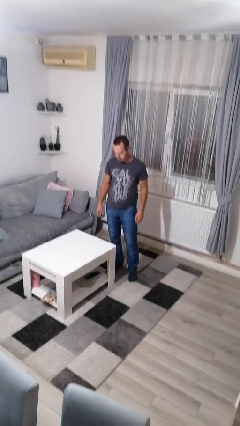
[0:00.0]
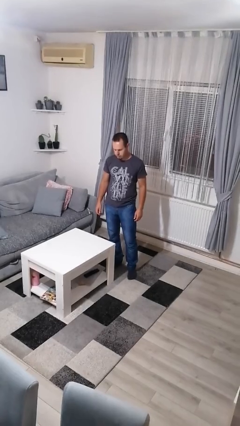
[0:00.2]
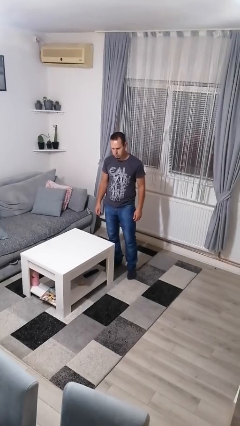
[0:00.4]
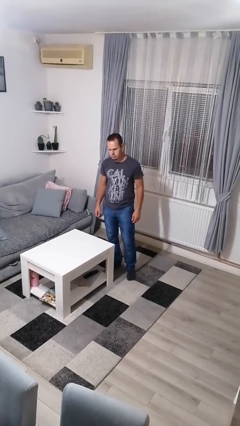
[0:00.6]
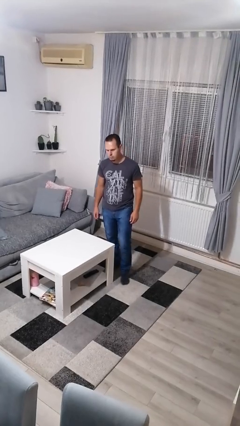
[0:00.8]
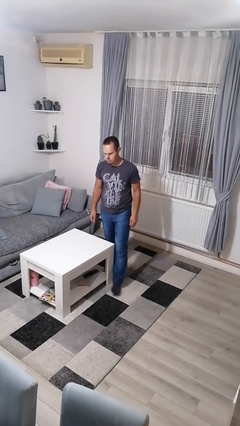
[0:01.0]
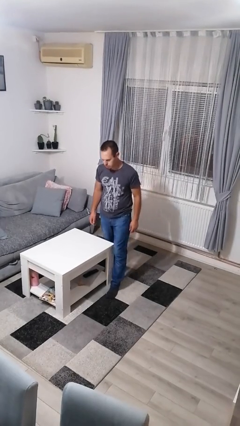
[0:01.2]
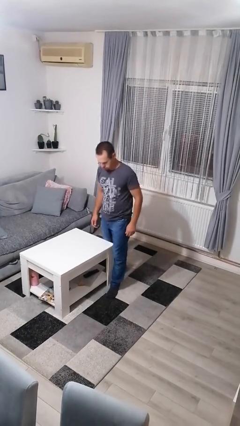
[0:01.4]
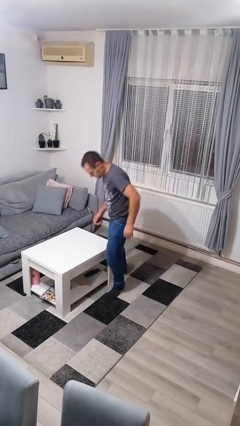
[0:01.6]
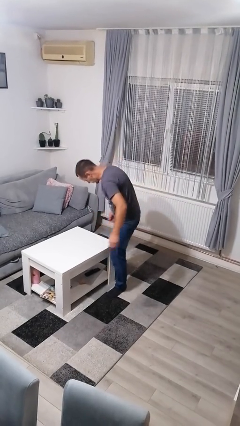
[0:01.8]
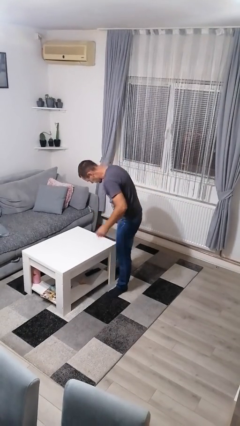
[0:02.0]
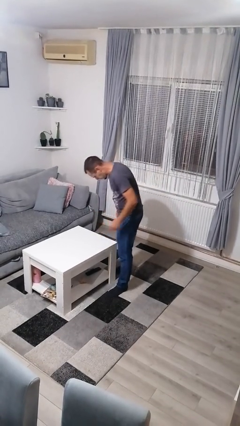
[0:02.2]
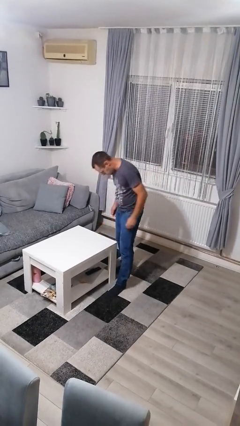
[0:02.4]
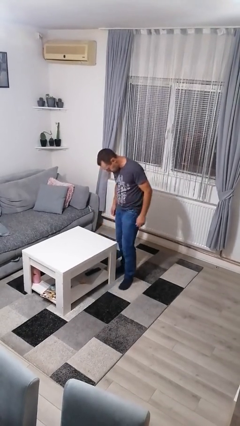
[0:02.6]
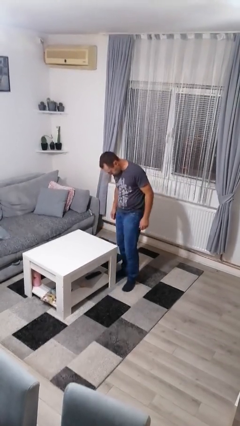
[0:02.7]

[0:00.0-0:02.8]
person bumps into table

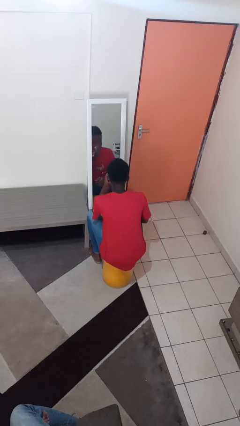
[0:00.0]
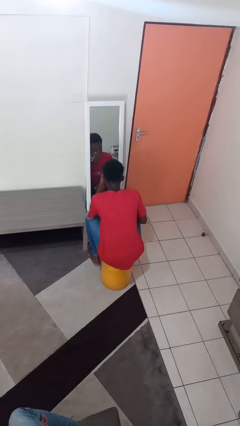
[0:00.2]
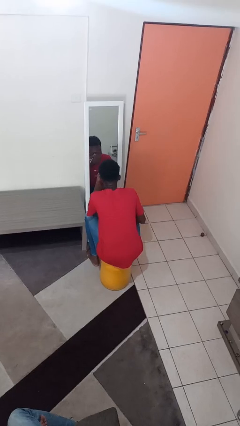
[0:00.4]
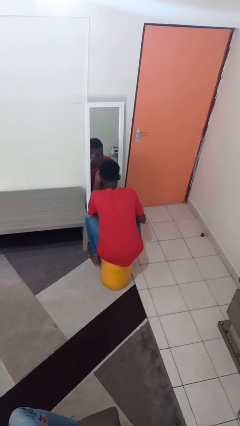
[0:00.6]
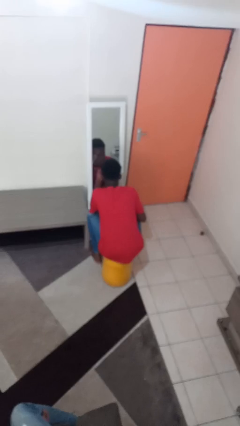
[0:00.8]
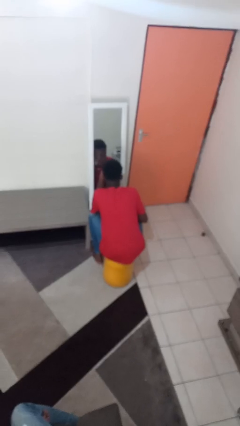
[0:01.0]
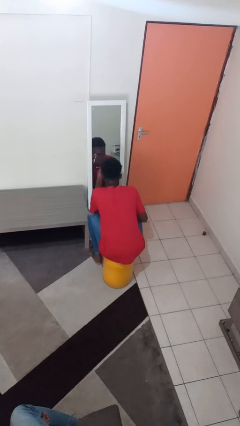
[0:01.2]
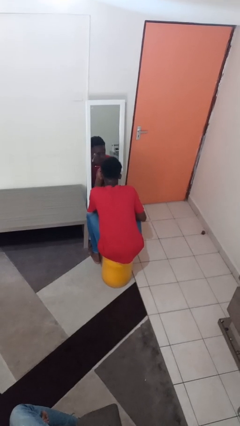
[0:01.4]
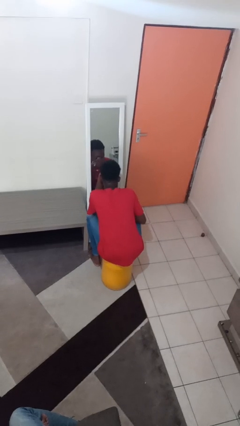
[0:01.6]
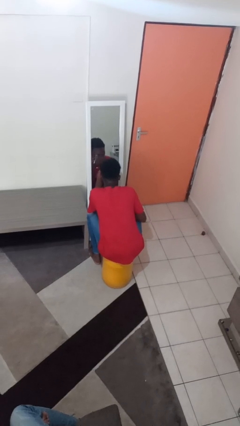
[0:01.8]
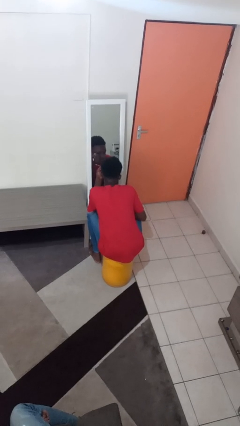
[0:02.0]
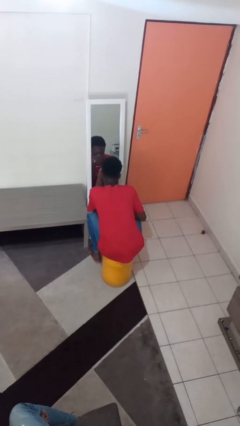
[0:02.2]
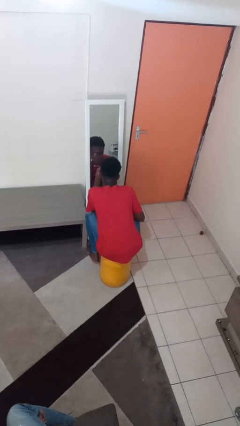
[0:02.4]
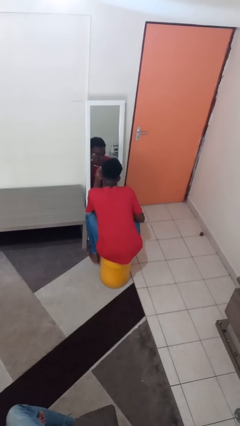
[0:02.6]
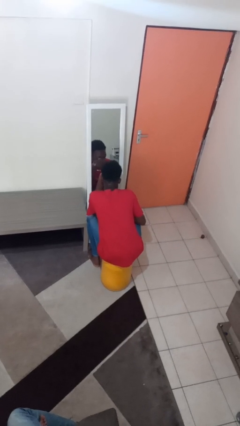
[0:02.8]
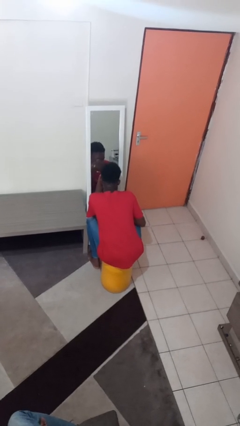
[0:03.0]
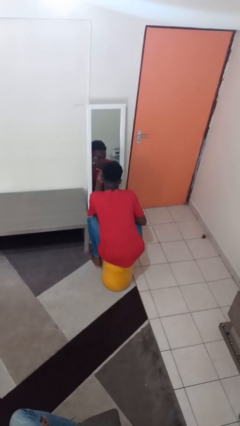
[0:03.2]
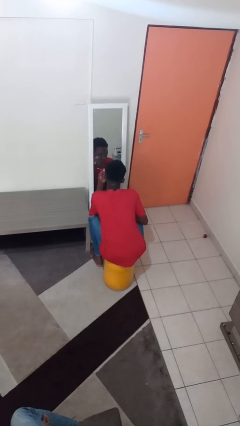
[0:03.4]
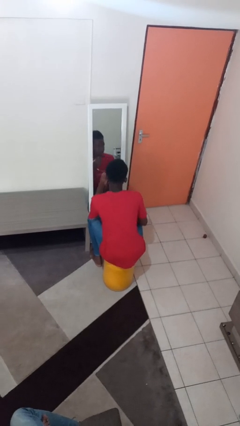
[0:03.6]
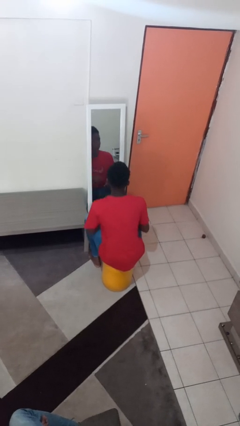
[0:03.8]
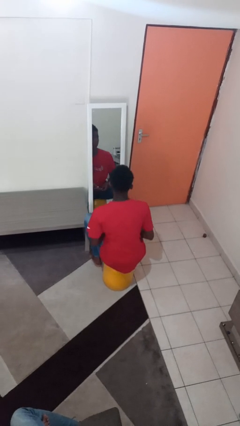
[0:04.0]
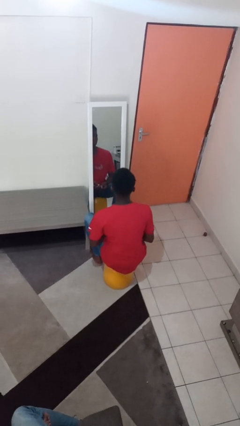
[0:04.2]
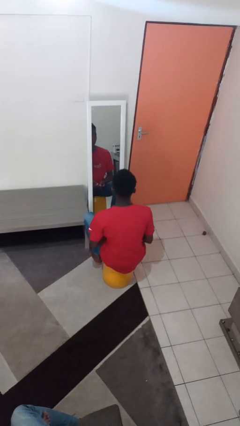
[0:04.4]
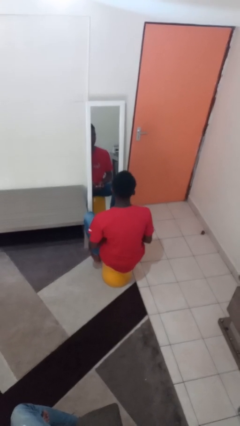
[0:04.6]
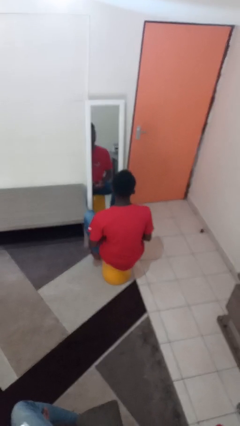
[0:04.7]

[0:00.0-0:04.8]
person applies eye makeup

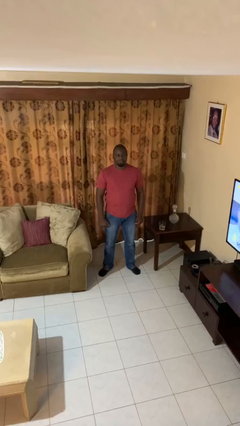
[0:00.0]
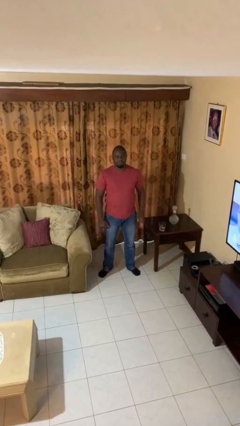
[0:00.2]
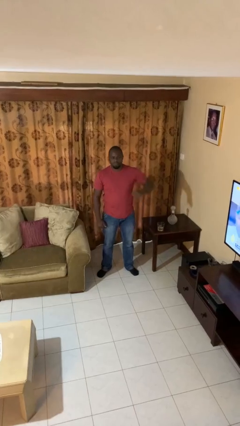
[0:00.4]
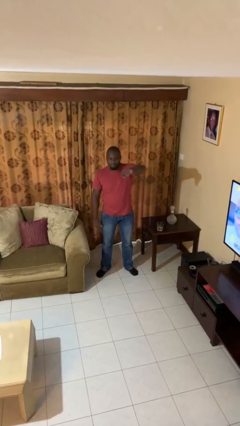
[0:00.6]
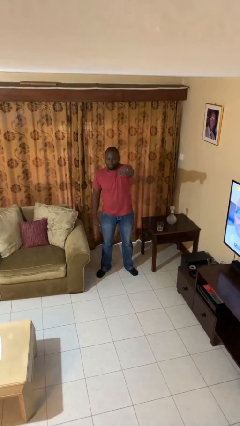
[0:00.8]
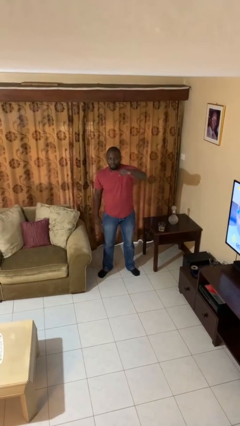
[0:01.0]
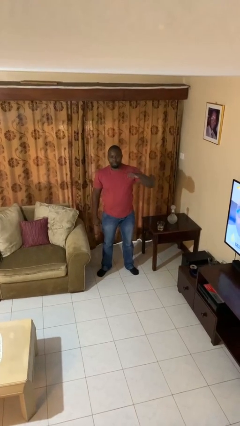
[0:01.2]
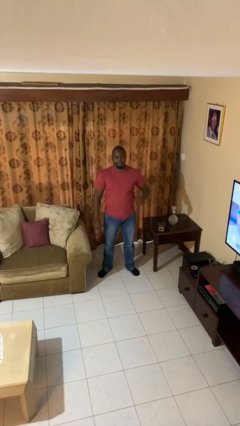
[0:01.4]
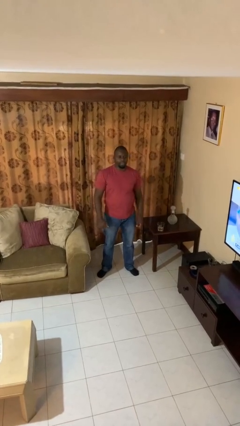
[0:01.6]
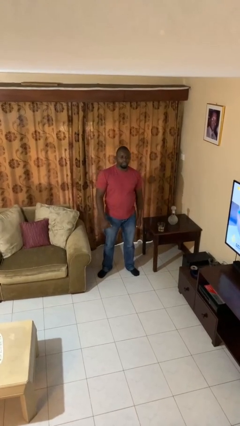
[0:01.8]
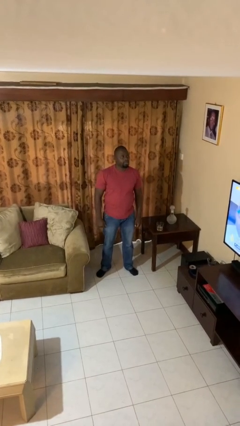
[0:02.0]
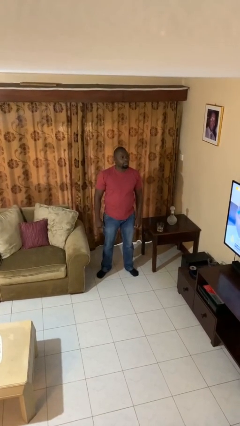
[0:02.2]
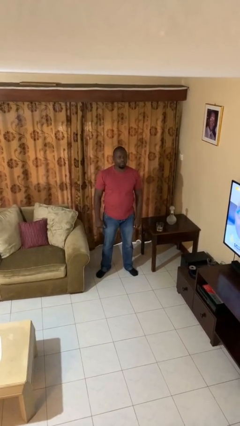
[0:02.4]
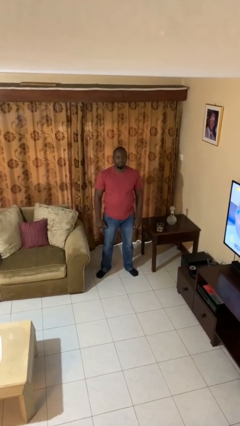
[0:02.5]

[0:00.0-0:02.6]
person punches

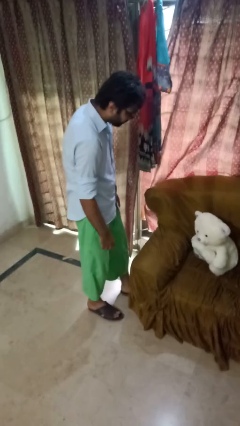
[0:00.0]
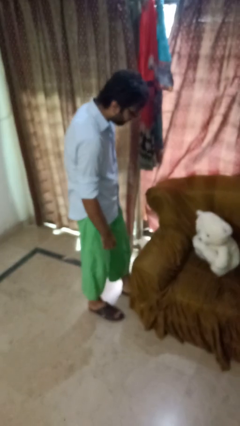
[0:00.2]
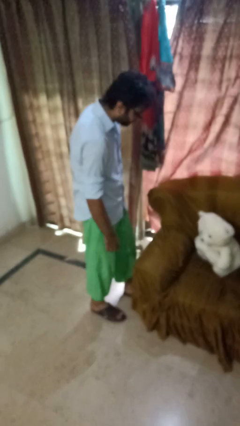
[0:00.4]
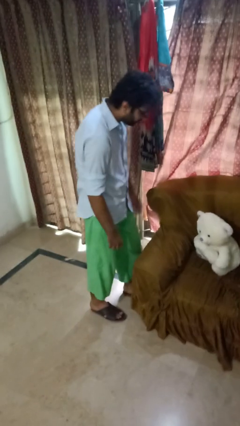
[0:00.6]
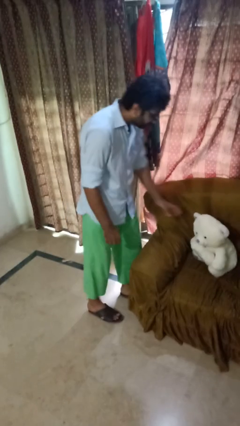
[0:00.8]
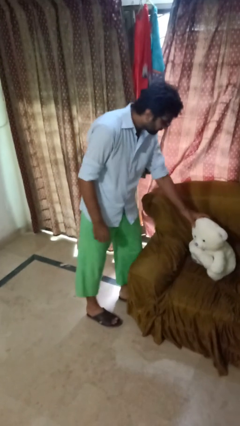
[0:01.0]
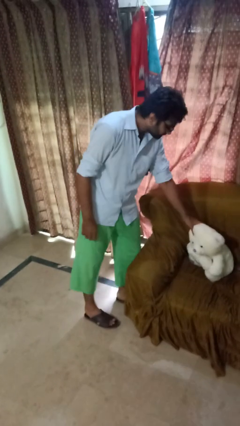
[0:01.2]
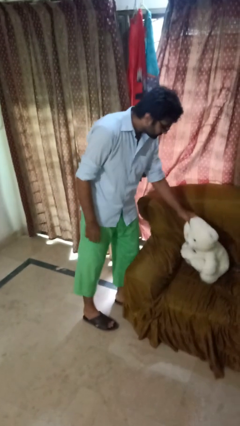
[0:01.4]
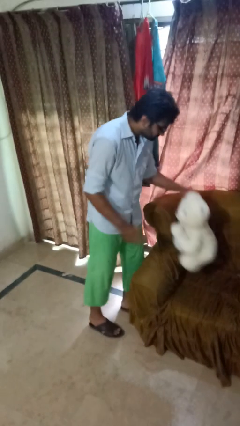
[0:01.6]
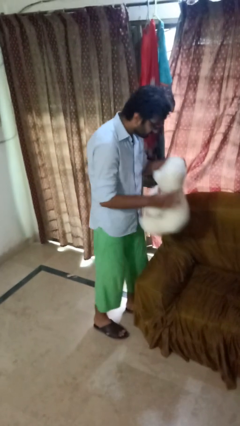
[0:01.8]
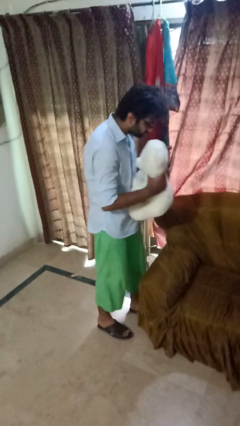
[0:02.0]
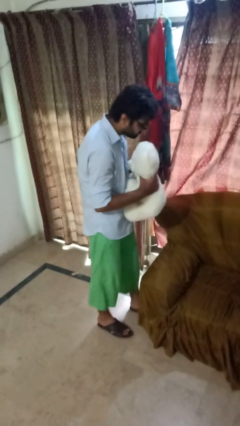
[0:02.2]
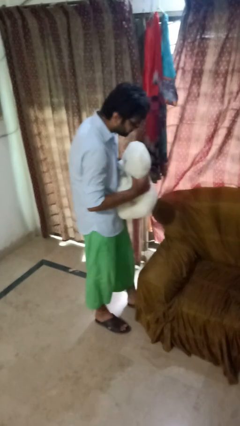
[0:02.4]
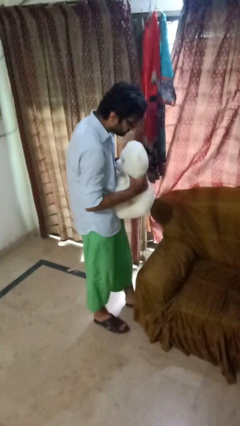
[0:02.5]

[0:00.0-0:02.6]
person picks up object from couch

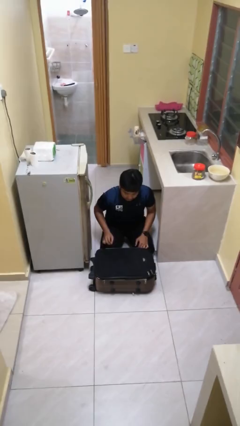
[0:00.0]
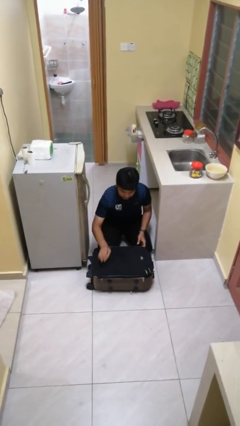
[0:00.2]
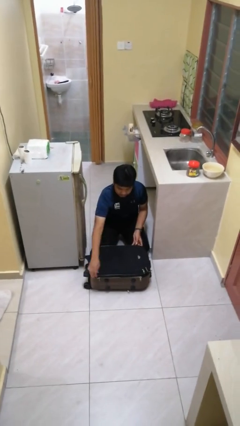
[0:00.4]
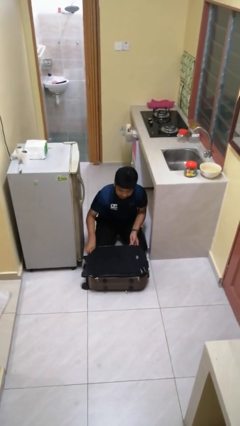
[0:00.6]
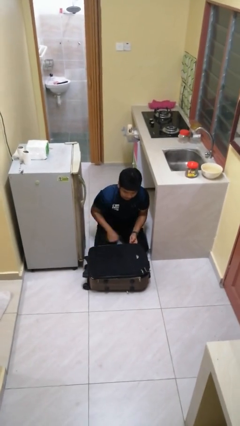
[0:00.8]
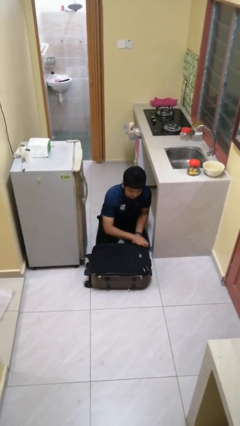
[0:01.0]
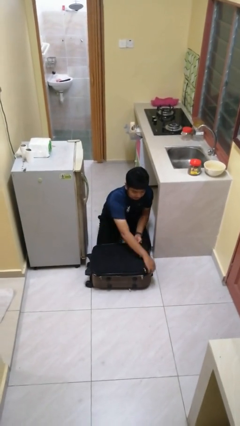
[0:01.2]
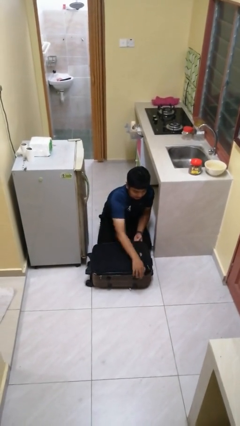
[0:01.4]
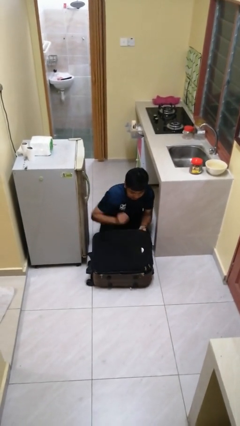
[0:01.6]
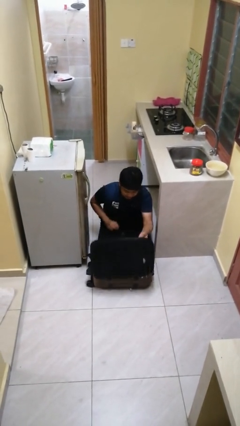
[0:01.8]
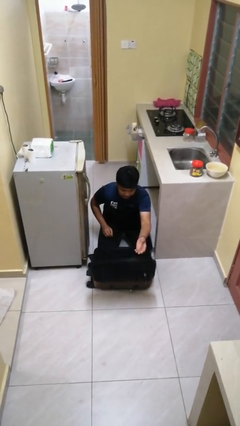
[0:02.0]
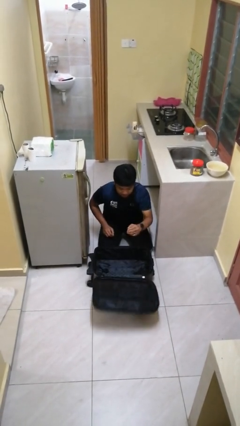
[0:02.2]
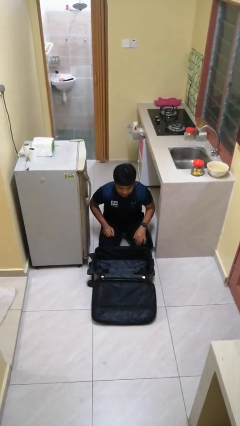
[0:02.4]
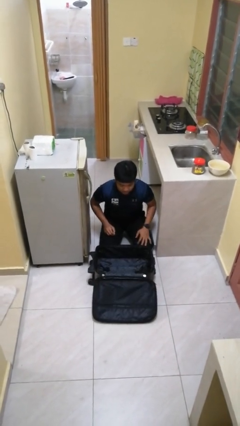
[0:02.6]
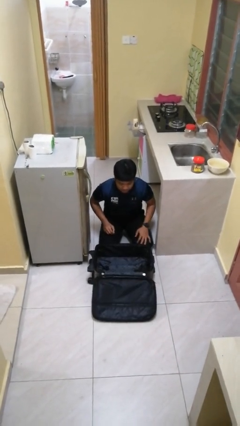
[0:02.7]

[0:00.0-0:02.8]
person opens suitcase

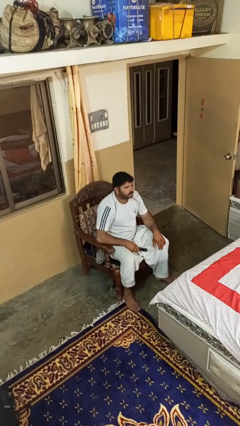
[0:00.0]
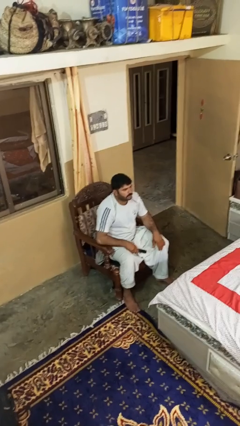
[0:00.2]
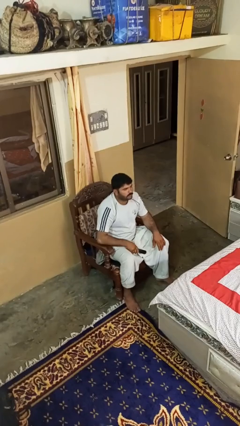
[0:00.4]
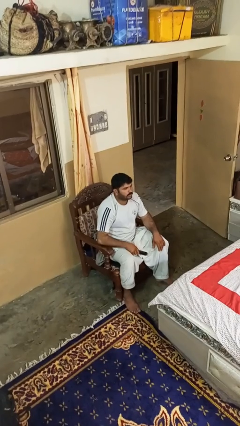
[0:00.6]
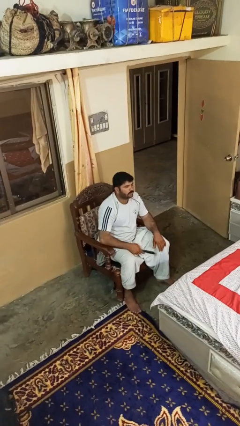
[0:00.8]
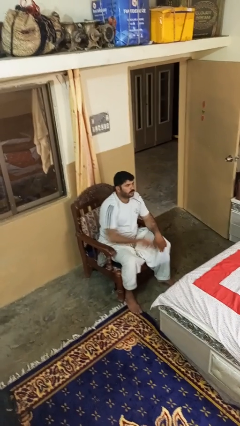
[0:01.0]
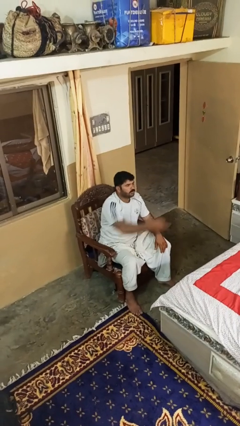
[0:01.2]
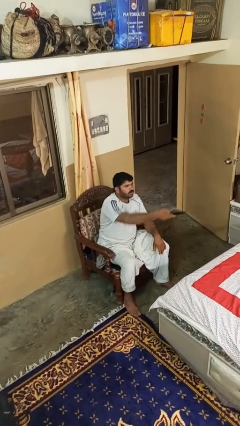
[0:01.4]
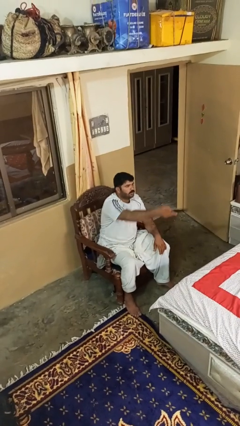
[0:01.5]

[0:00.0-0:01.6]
person uses television remote
